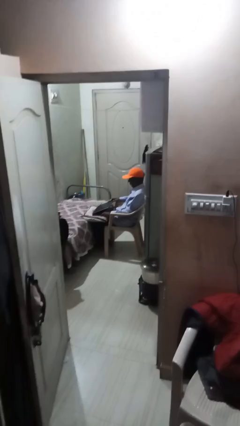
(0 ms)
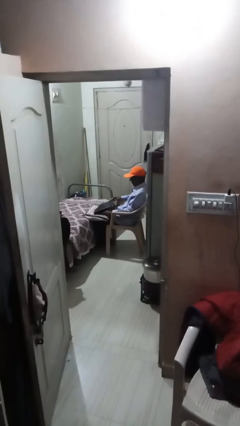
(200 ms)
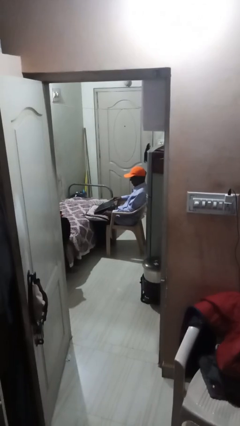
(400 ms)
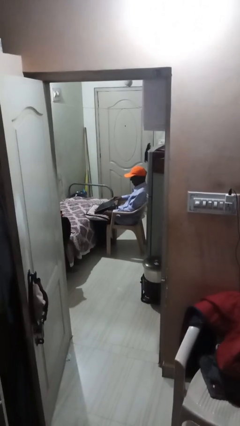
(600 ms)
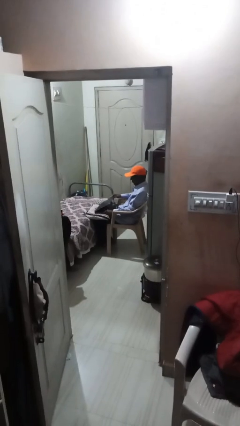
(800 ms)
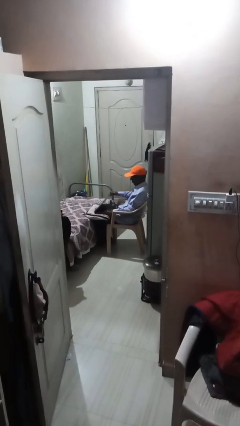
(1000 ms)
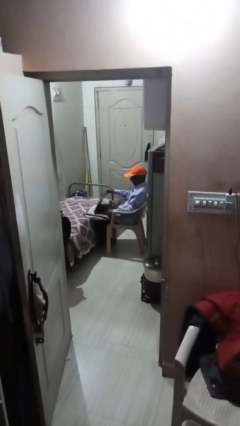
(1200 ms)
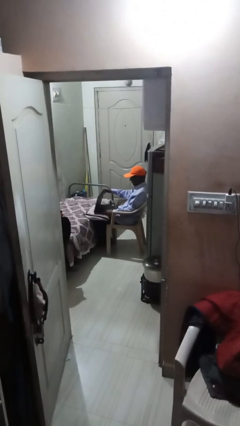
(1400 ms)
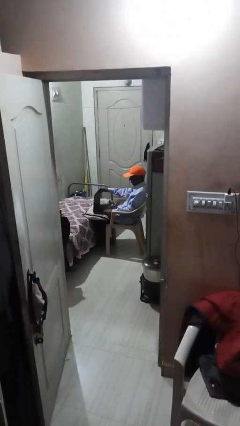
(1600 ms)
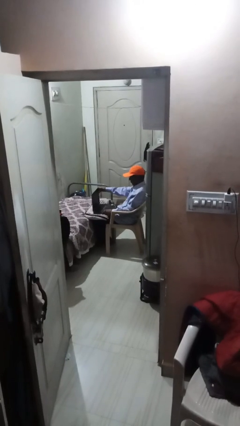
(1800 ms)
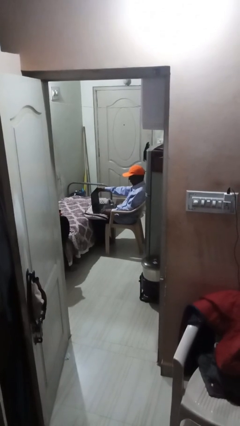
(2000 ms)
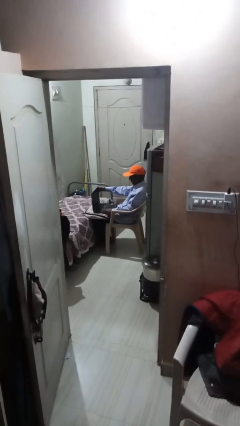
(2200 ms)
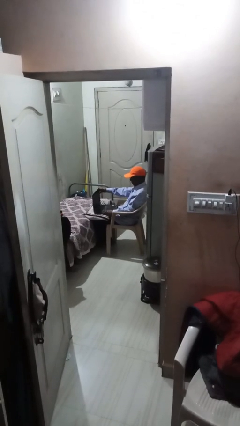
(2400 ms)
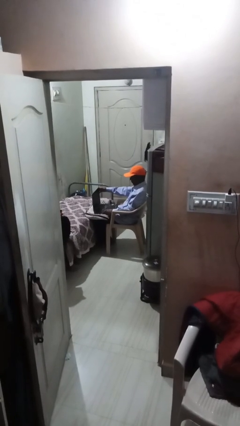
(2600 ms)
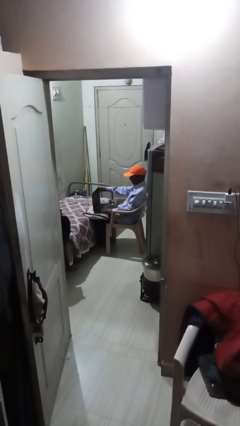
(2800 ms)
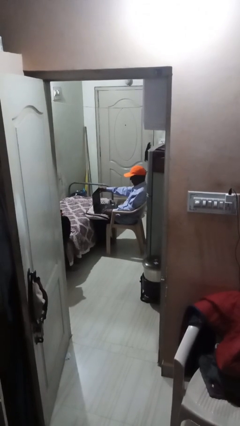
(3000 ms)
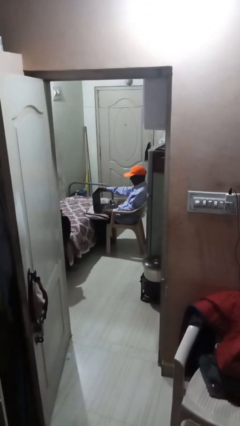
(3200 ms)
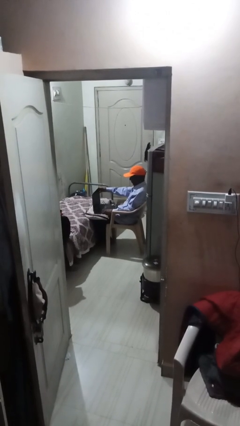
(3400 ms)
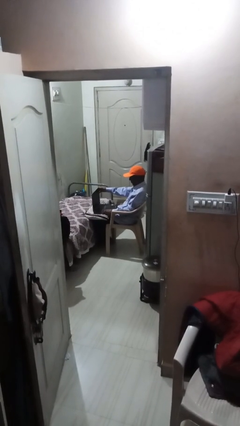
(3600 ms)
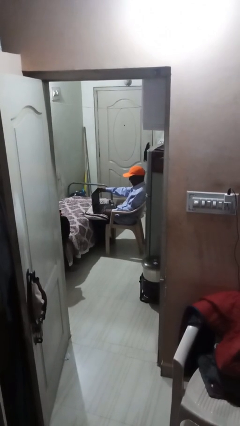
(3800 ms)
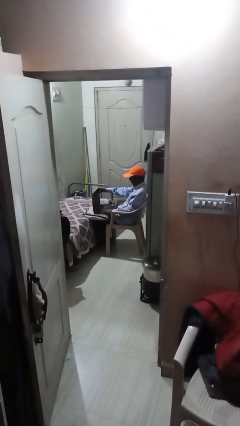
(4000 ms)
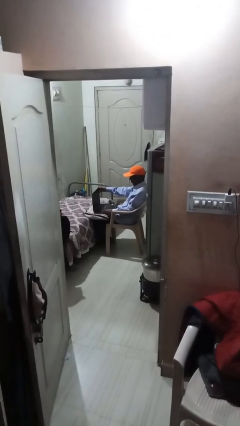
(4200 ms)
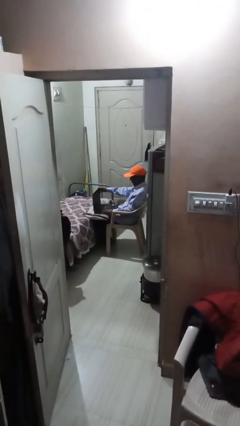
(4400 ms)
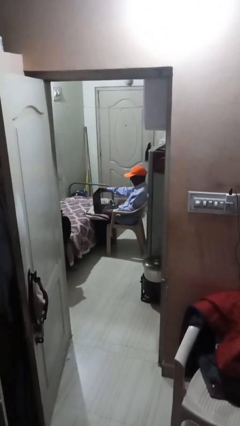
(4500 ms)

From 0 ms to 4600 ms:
person interacts with laptop

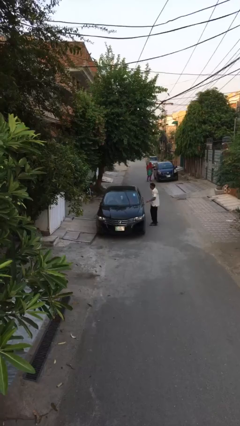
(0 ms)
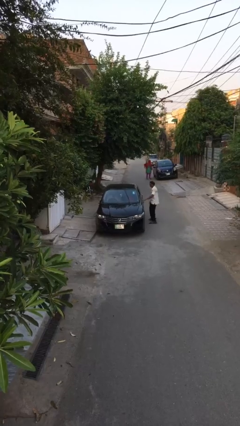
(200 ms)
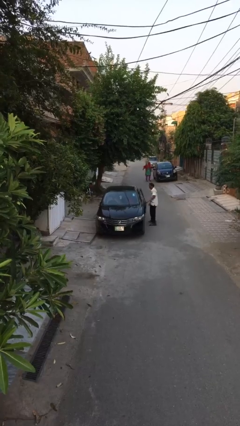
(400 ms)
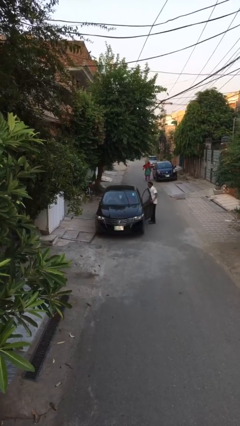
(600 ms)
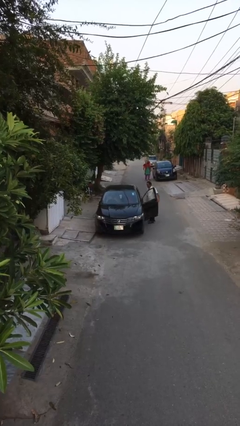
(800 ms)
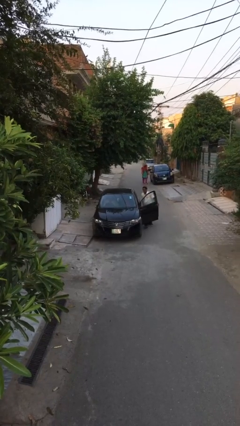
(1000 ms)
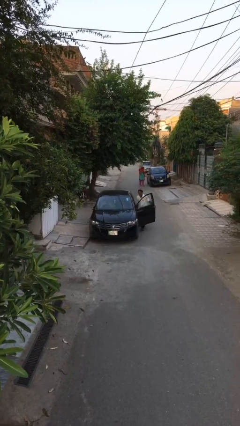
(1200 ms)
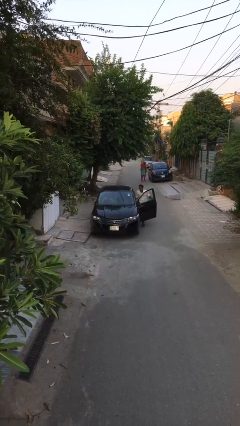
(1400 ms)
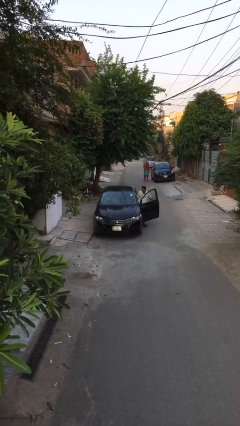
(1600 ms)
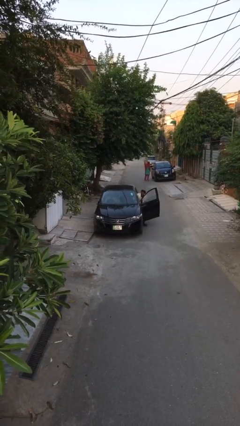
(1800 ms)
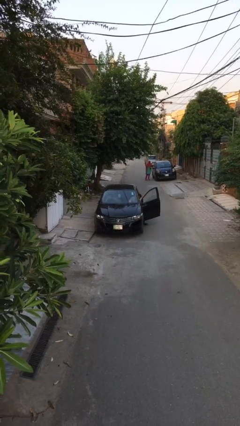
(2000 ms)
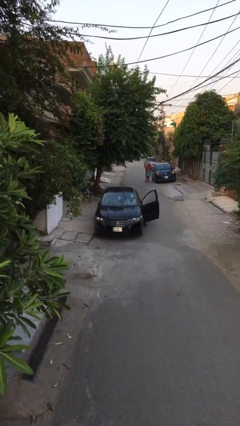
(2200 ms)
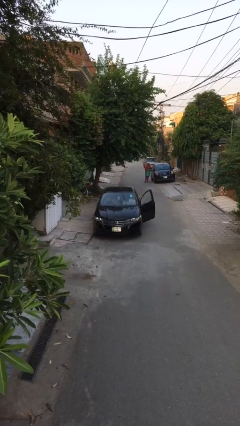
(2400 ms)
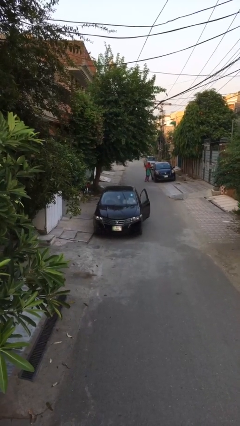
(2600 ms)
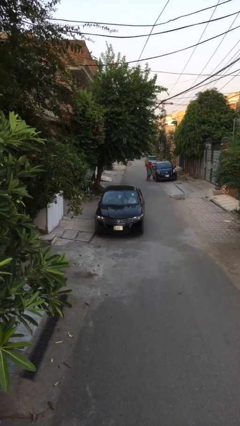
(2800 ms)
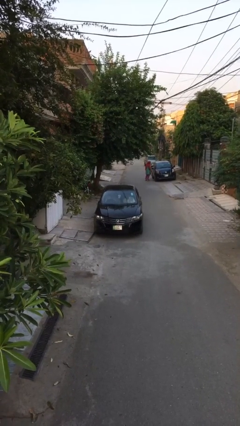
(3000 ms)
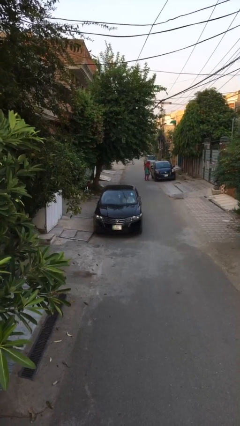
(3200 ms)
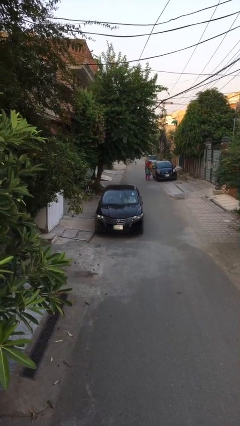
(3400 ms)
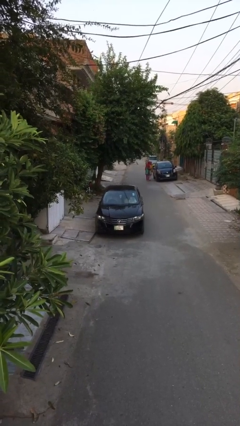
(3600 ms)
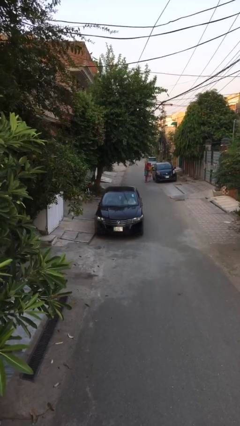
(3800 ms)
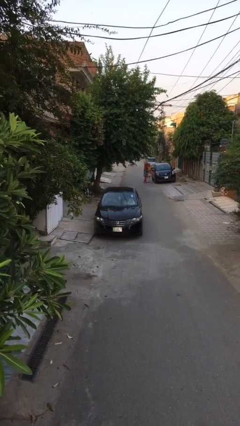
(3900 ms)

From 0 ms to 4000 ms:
car picks up person

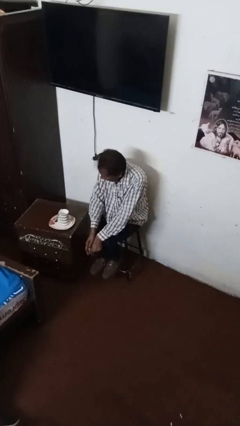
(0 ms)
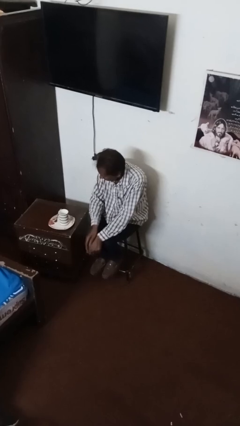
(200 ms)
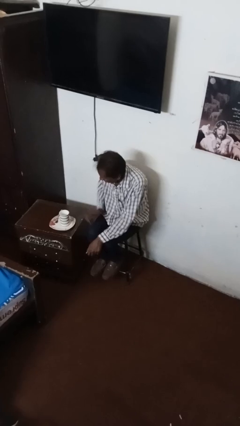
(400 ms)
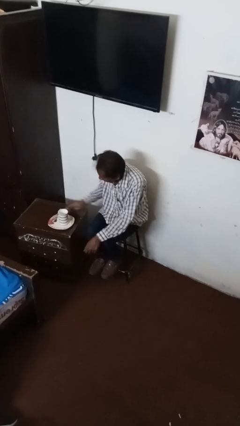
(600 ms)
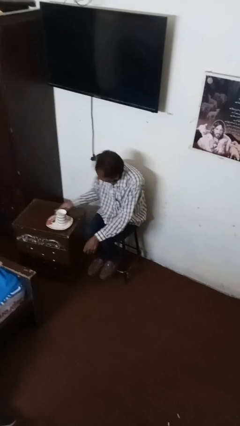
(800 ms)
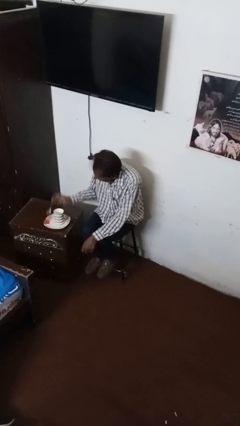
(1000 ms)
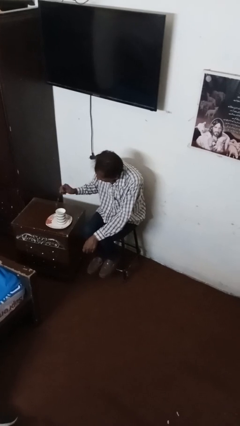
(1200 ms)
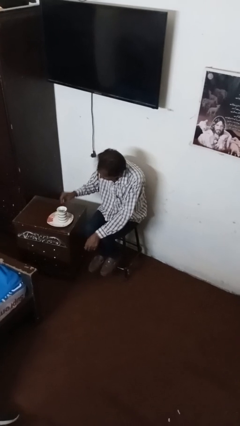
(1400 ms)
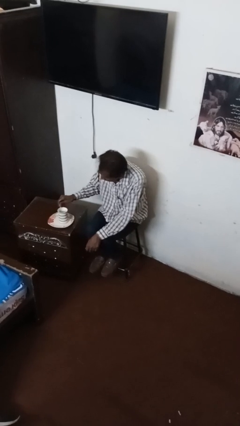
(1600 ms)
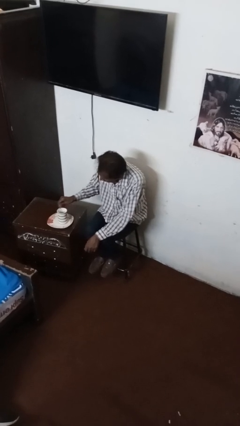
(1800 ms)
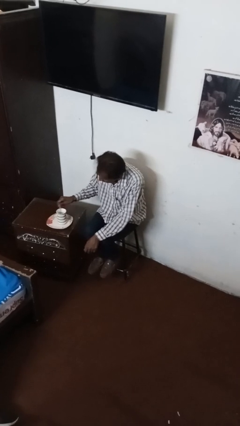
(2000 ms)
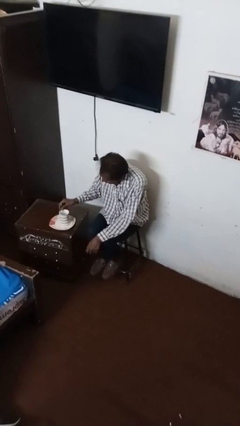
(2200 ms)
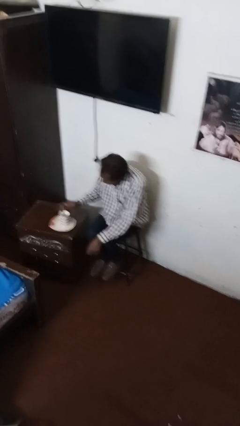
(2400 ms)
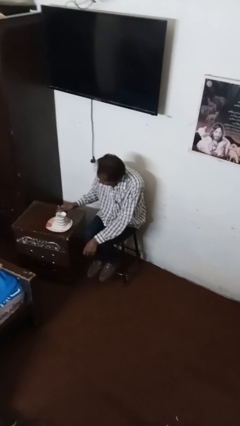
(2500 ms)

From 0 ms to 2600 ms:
person stirs mug

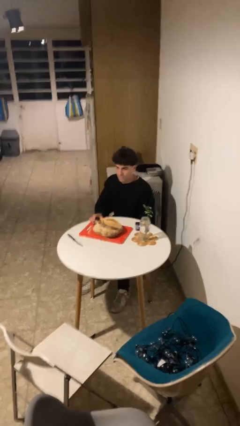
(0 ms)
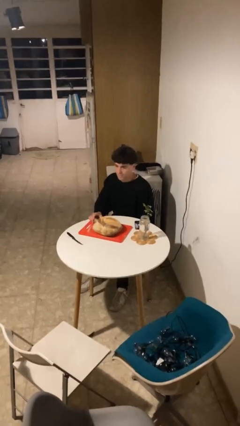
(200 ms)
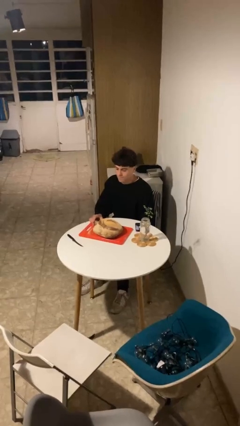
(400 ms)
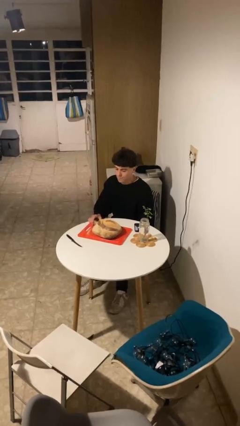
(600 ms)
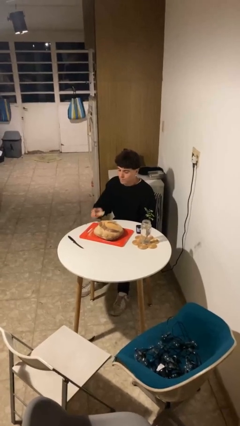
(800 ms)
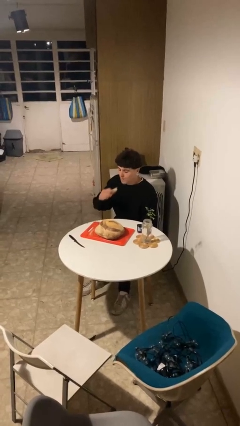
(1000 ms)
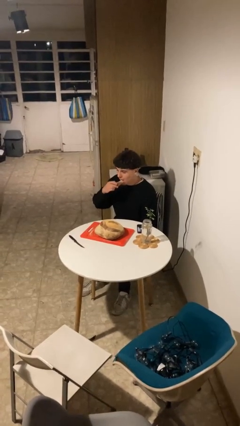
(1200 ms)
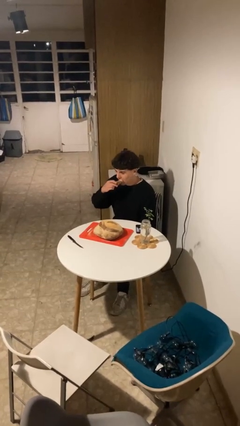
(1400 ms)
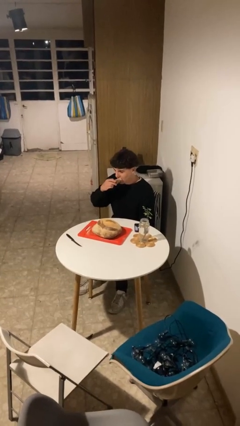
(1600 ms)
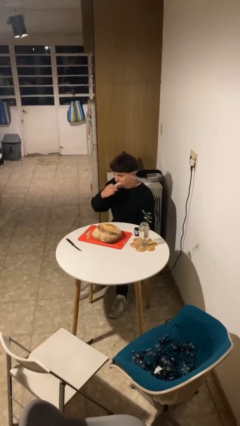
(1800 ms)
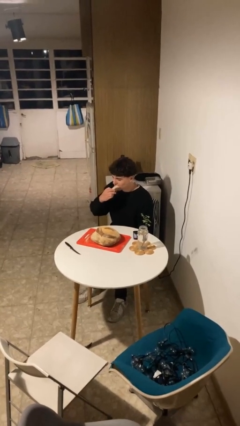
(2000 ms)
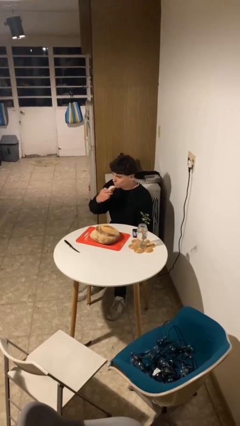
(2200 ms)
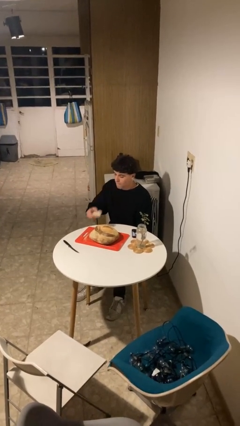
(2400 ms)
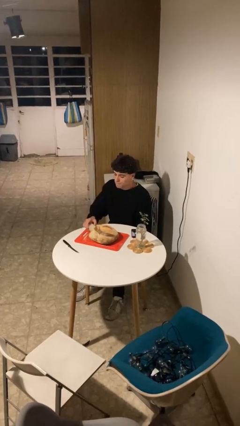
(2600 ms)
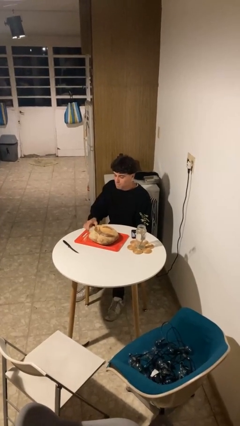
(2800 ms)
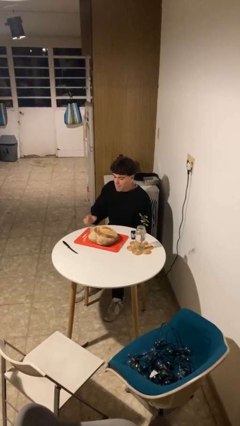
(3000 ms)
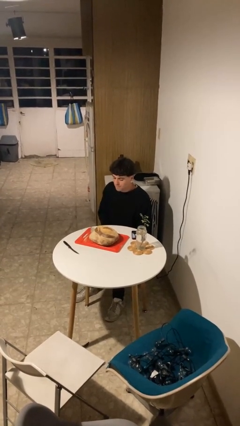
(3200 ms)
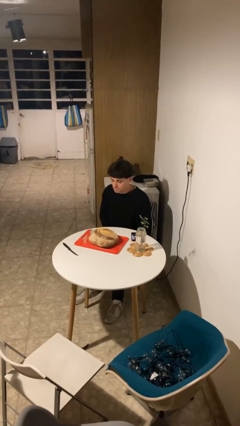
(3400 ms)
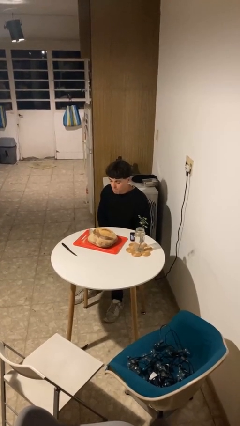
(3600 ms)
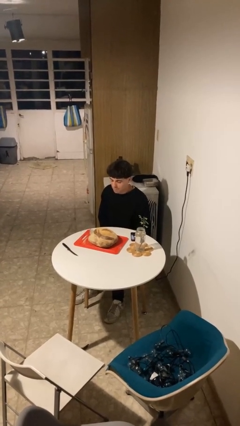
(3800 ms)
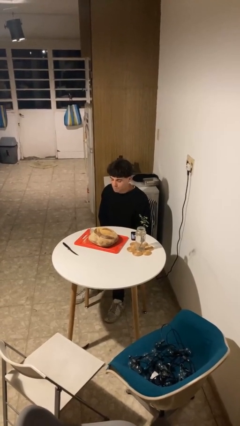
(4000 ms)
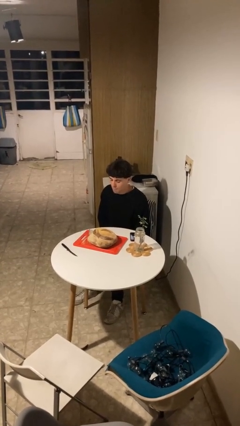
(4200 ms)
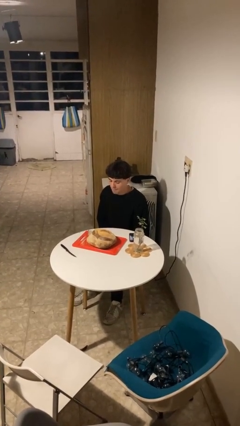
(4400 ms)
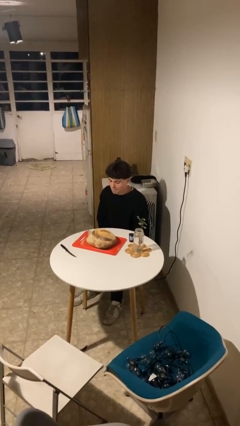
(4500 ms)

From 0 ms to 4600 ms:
person eats with hands

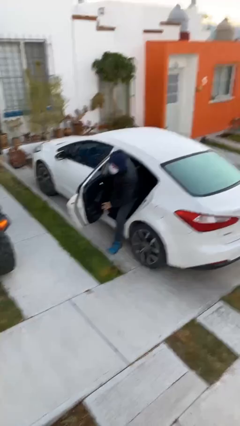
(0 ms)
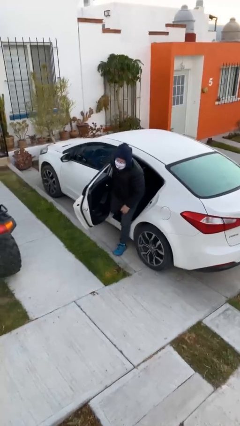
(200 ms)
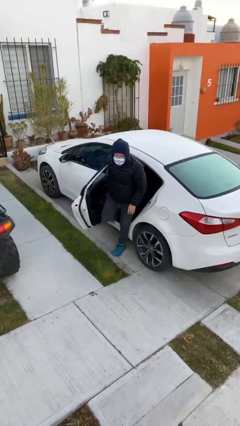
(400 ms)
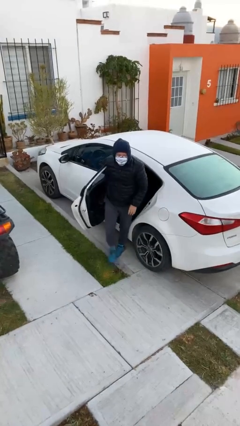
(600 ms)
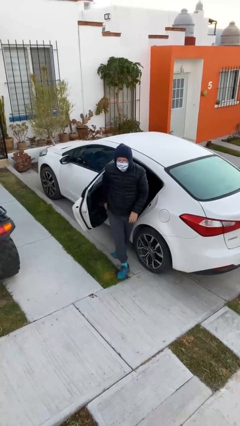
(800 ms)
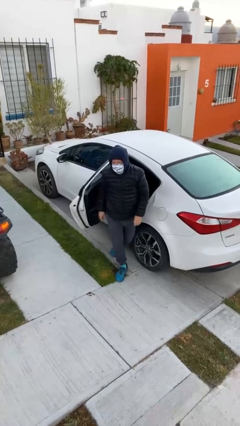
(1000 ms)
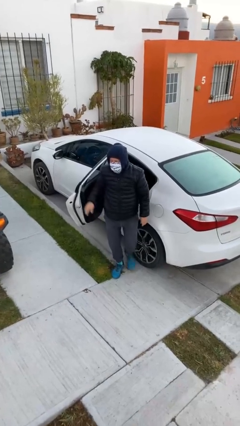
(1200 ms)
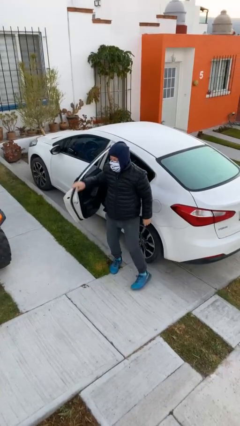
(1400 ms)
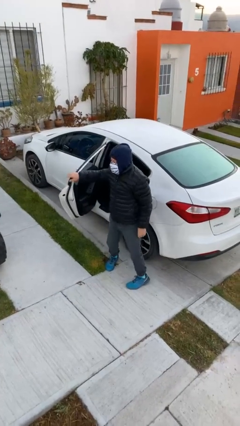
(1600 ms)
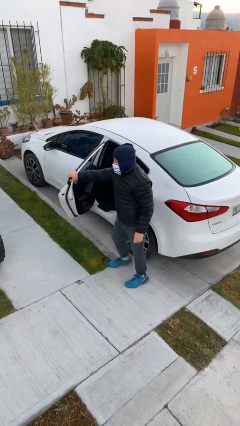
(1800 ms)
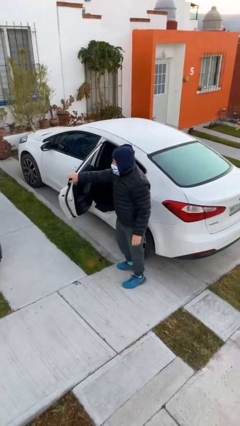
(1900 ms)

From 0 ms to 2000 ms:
person exits car

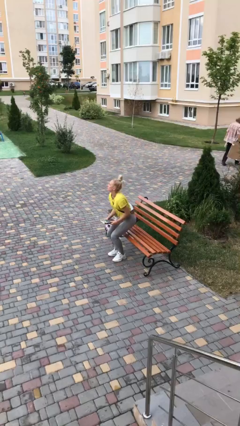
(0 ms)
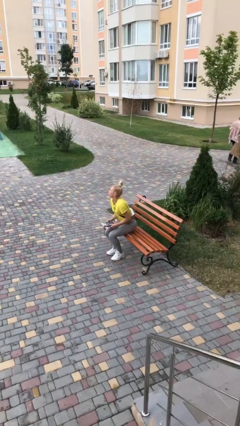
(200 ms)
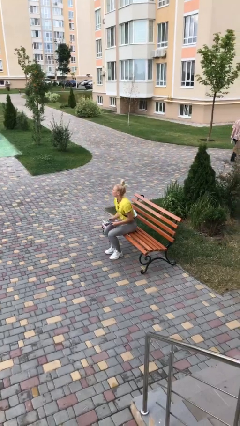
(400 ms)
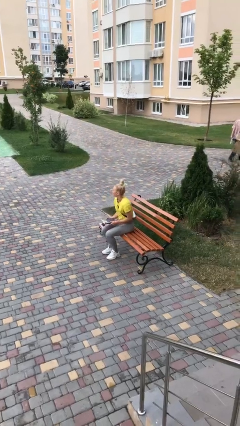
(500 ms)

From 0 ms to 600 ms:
person sits down
